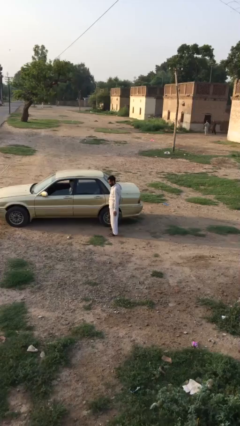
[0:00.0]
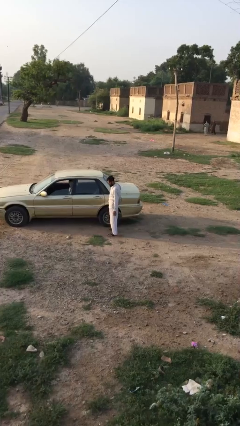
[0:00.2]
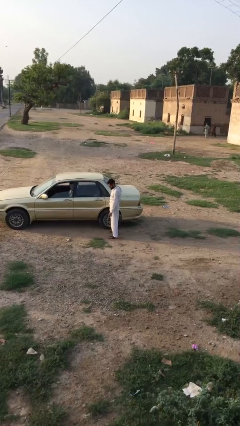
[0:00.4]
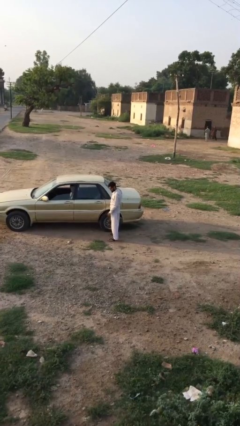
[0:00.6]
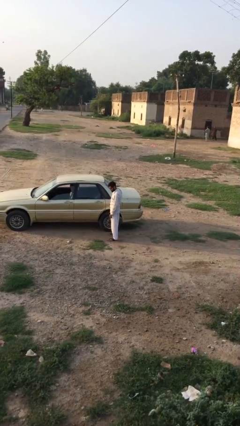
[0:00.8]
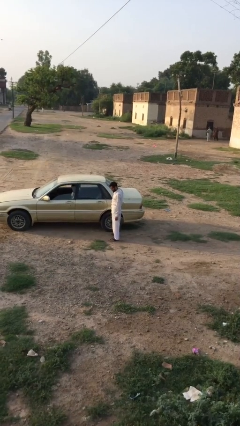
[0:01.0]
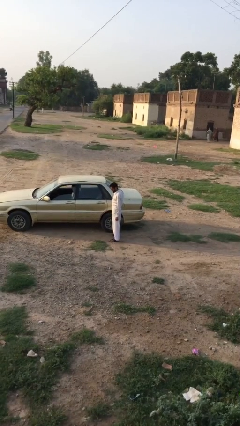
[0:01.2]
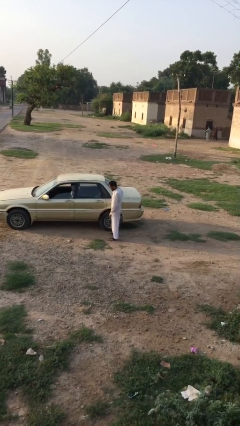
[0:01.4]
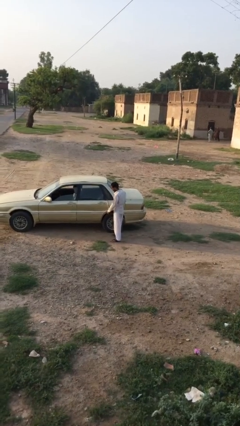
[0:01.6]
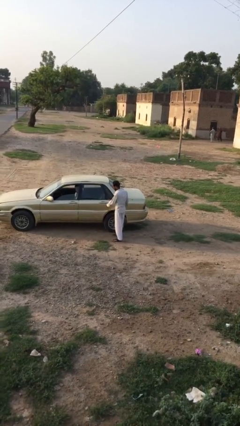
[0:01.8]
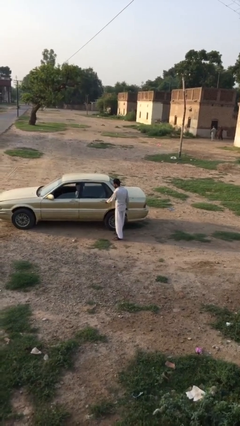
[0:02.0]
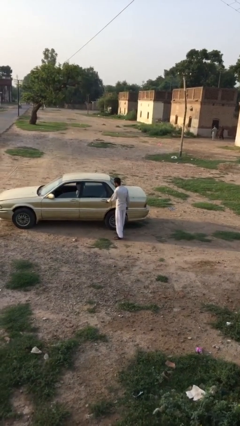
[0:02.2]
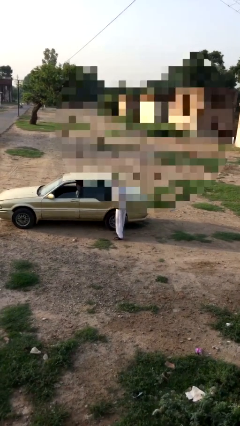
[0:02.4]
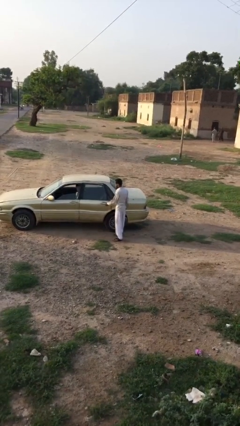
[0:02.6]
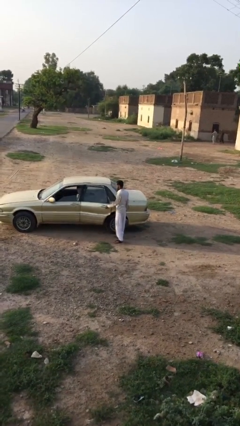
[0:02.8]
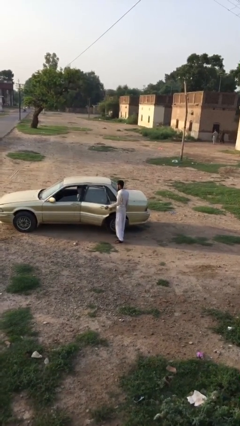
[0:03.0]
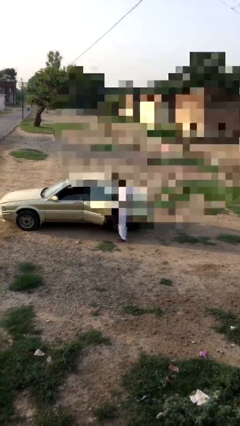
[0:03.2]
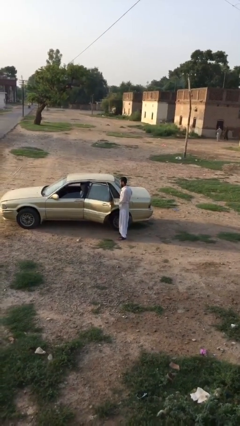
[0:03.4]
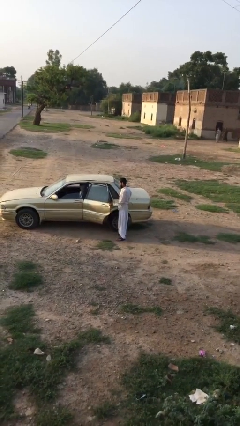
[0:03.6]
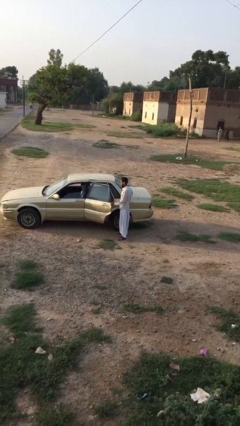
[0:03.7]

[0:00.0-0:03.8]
person opens car door

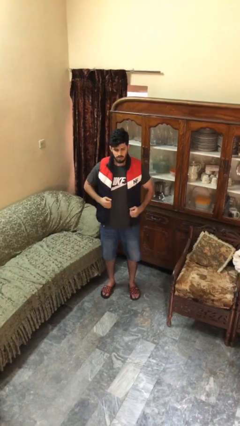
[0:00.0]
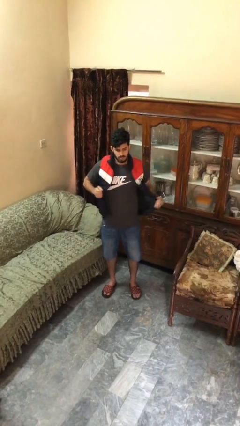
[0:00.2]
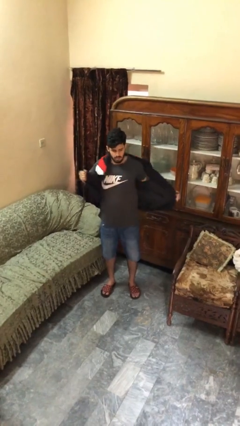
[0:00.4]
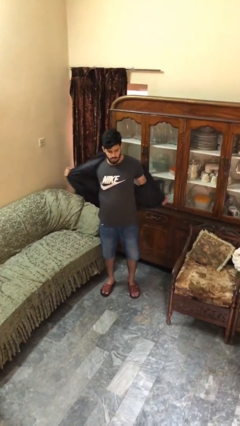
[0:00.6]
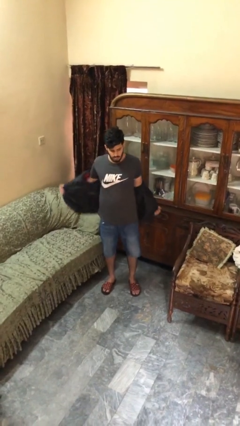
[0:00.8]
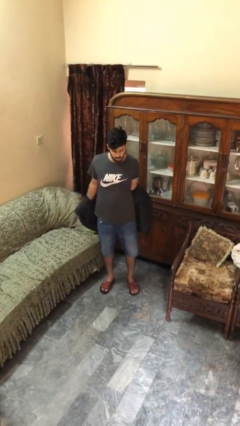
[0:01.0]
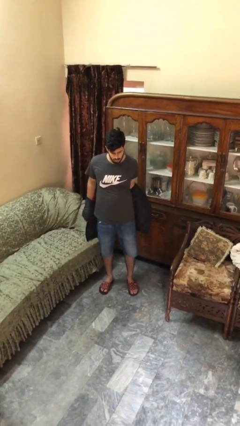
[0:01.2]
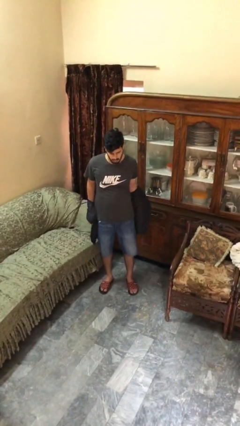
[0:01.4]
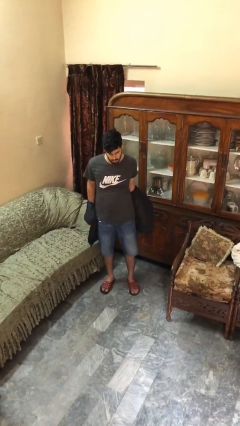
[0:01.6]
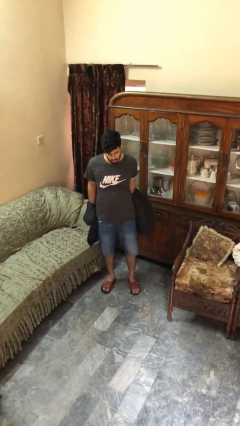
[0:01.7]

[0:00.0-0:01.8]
person takes off jacket

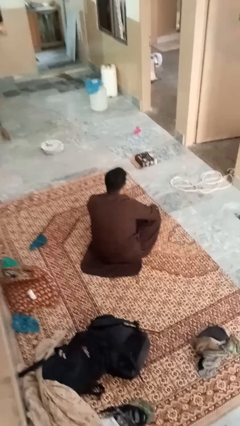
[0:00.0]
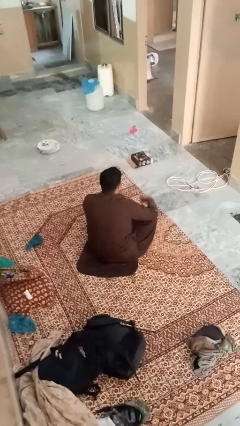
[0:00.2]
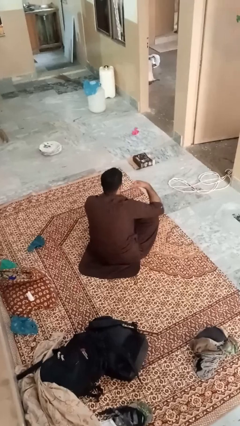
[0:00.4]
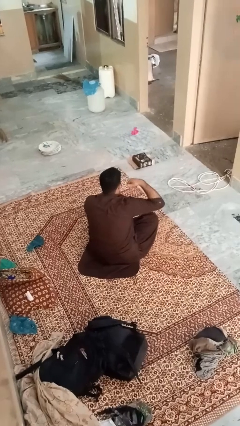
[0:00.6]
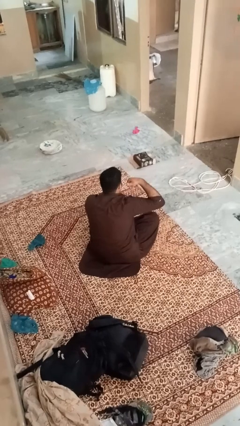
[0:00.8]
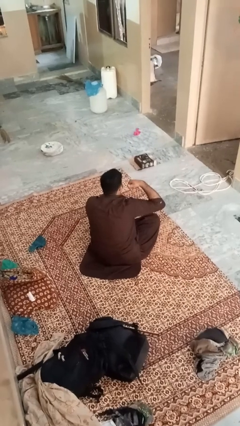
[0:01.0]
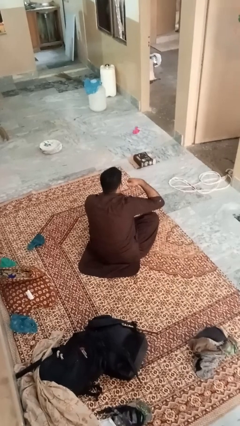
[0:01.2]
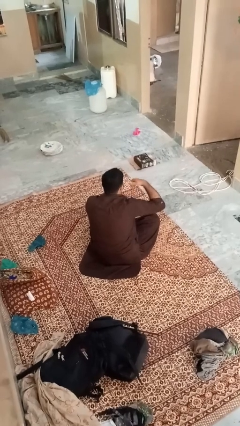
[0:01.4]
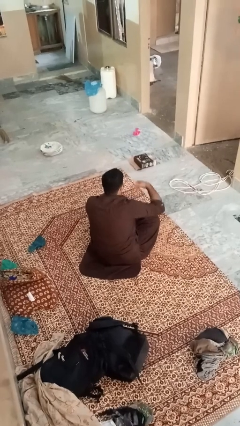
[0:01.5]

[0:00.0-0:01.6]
person gestures call me

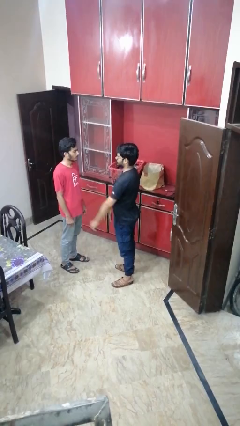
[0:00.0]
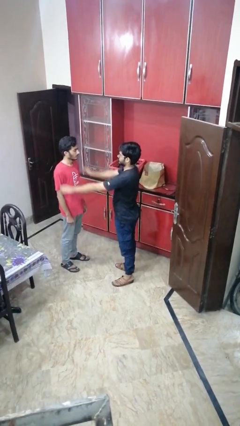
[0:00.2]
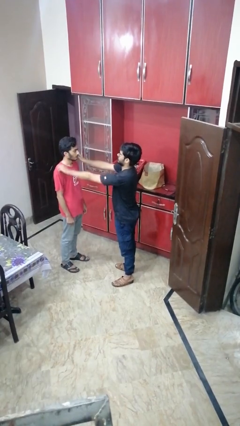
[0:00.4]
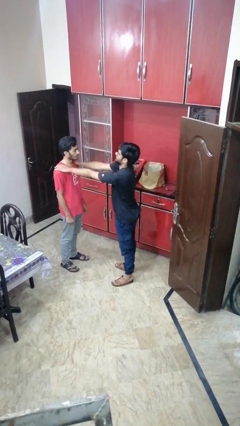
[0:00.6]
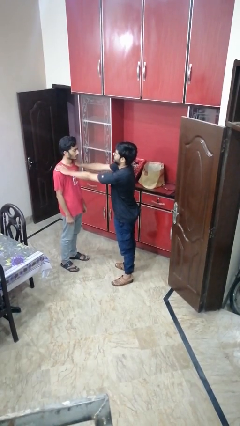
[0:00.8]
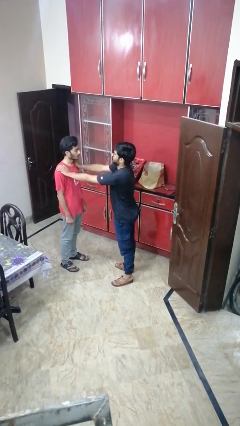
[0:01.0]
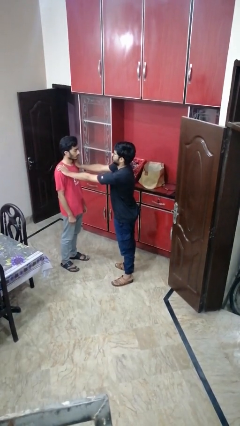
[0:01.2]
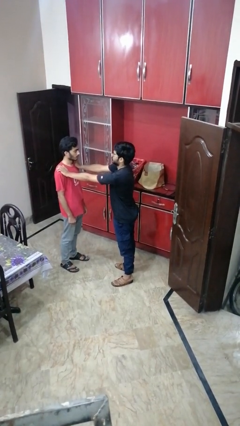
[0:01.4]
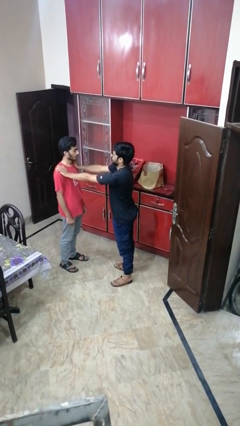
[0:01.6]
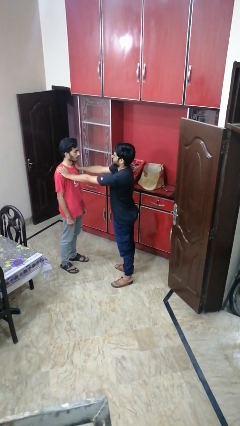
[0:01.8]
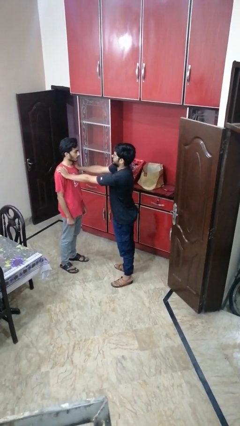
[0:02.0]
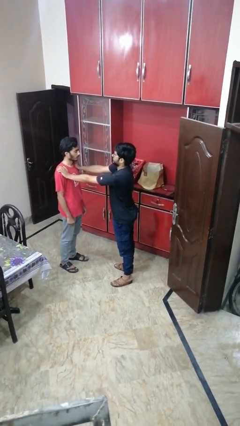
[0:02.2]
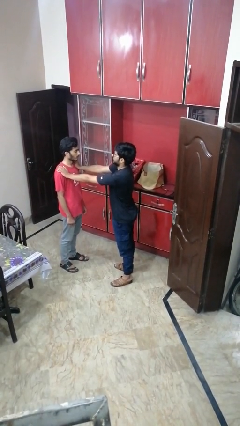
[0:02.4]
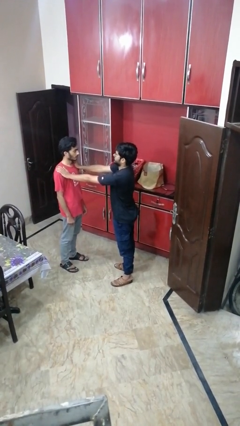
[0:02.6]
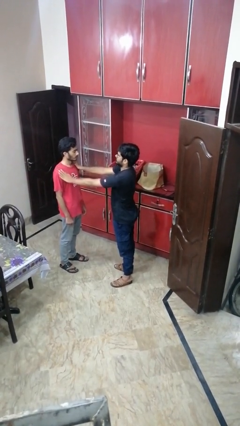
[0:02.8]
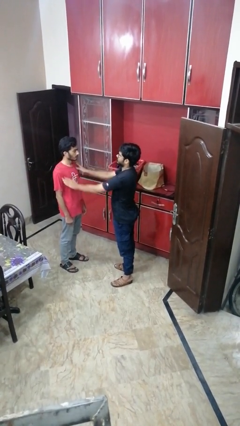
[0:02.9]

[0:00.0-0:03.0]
person pounds shoulders of person

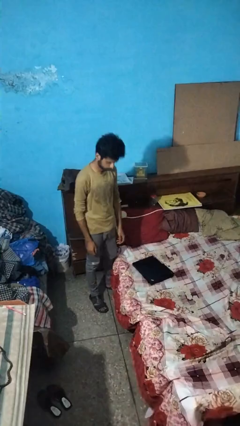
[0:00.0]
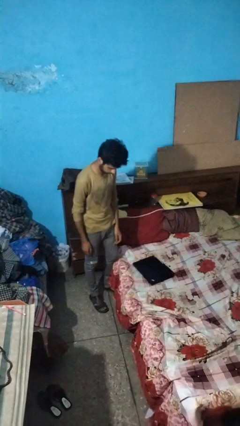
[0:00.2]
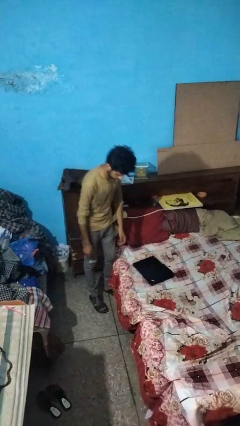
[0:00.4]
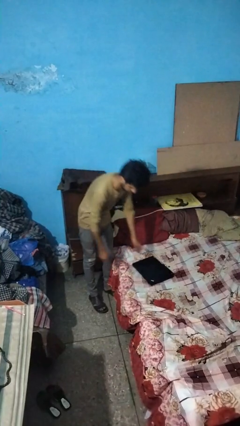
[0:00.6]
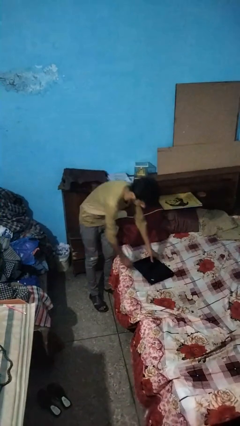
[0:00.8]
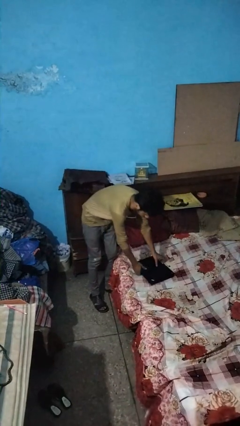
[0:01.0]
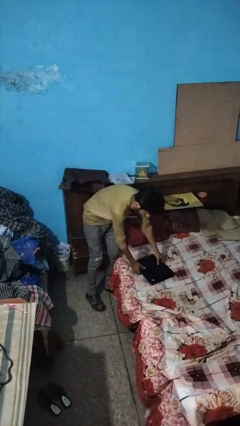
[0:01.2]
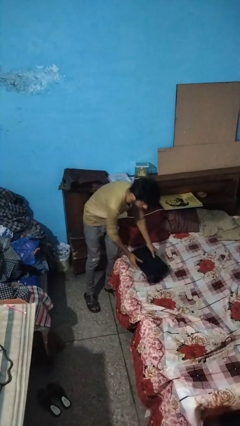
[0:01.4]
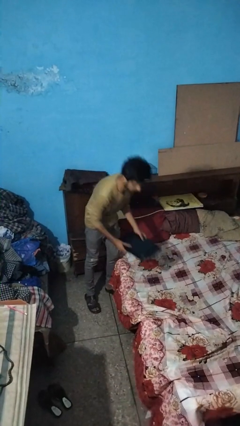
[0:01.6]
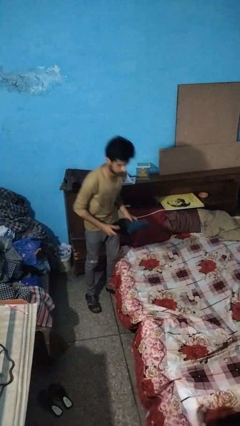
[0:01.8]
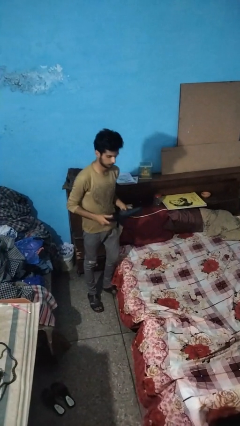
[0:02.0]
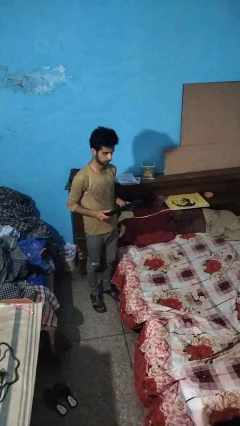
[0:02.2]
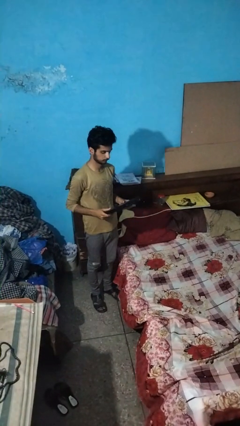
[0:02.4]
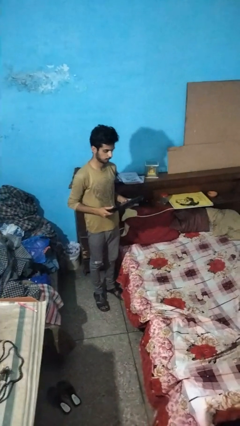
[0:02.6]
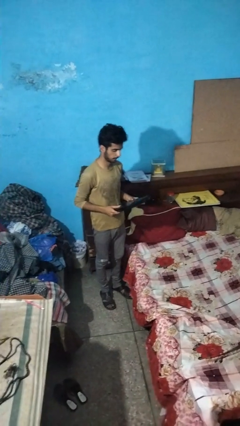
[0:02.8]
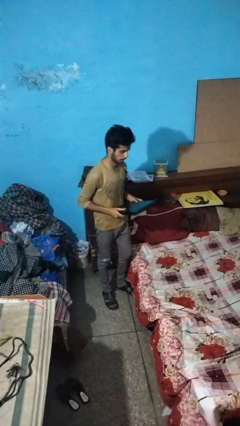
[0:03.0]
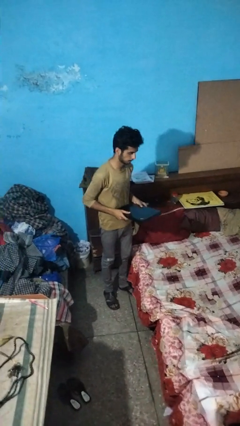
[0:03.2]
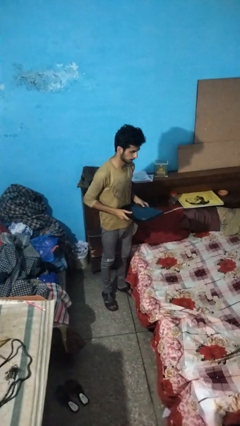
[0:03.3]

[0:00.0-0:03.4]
person picks up object from bed

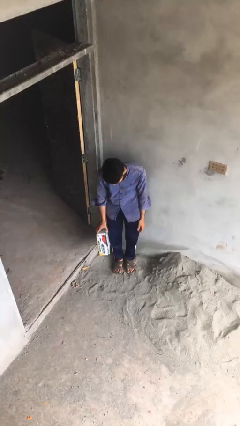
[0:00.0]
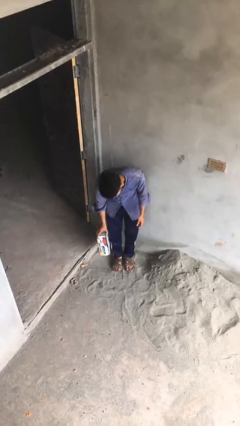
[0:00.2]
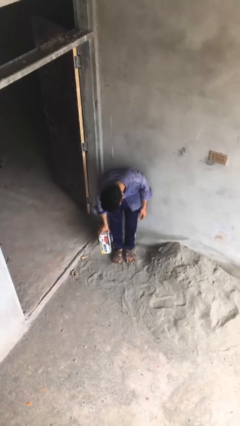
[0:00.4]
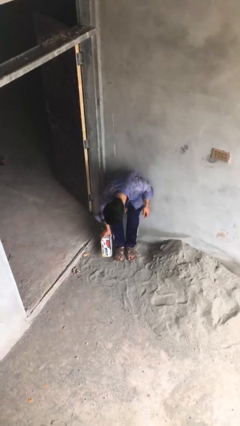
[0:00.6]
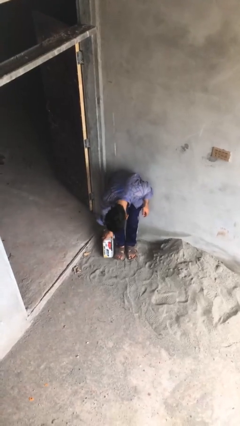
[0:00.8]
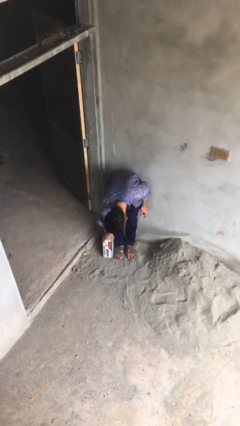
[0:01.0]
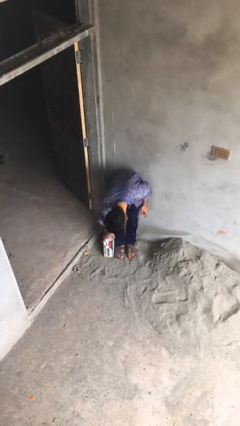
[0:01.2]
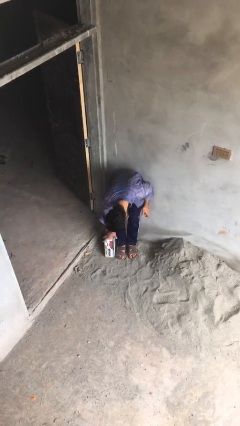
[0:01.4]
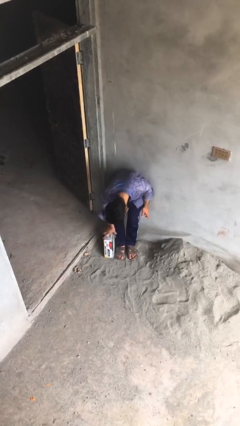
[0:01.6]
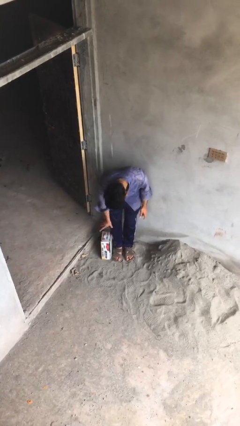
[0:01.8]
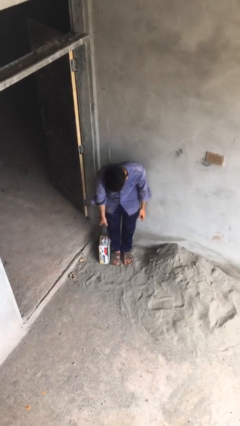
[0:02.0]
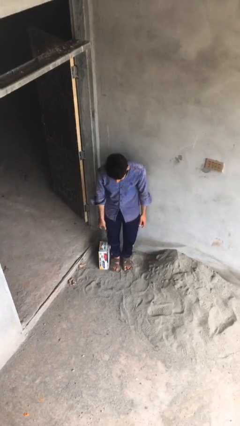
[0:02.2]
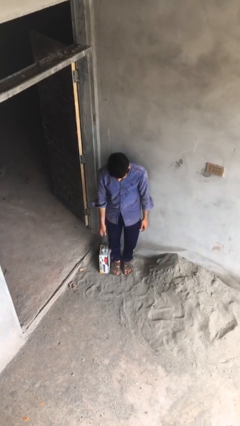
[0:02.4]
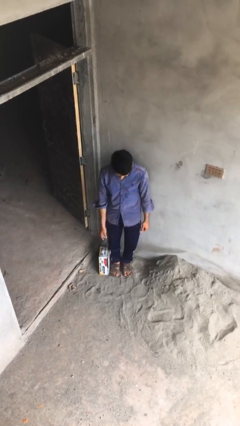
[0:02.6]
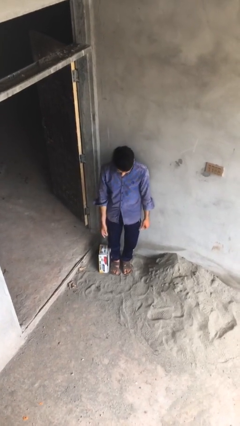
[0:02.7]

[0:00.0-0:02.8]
person puts down object on floor

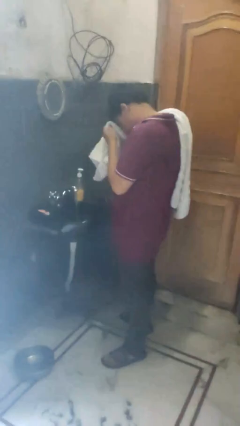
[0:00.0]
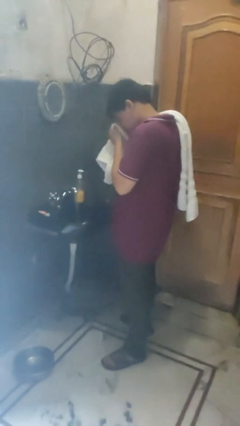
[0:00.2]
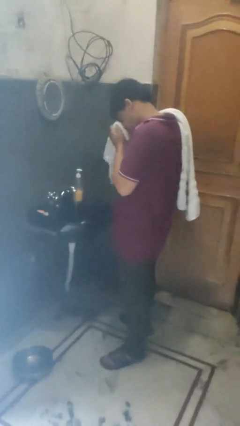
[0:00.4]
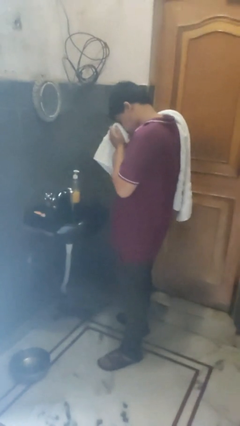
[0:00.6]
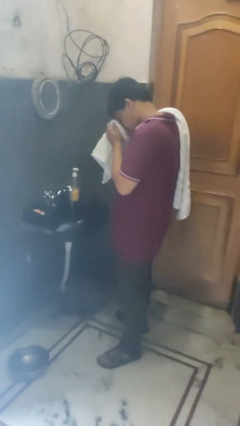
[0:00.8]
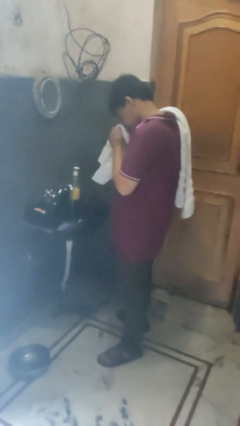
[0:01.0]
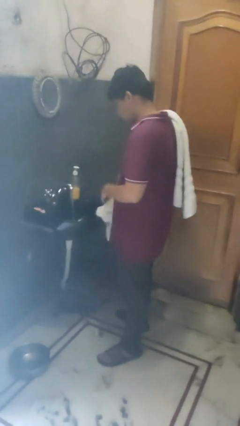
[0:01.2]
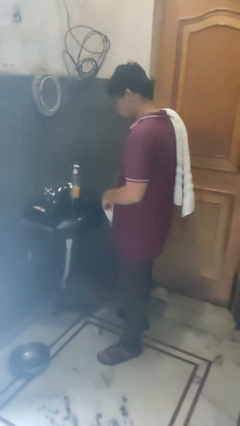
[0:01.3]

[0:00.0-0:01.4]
person dries face with towel
